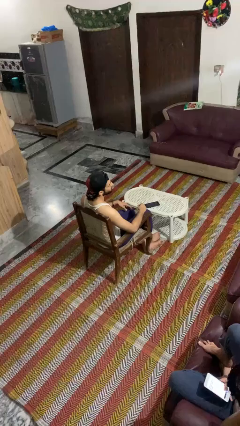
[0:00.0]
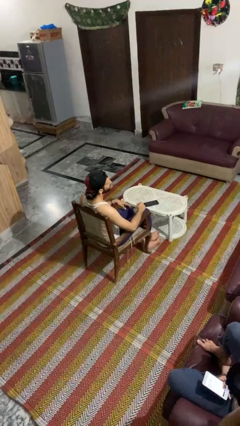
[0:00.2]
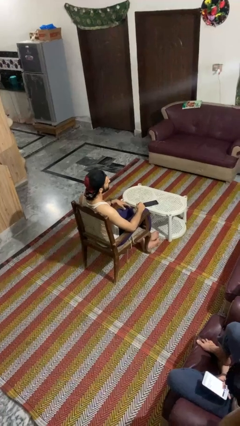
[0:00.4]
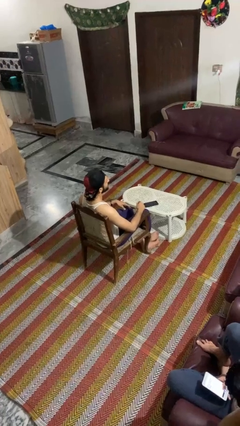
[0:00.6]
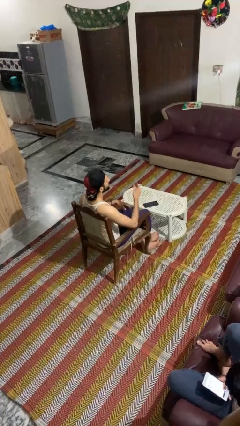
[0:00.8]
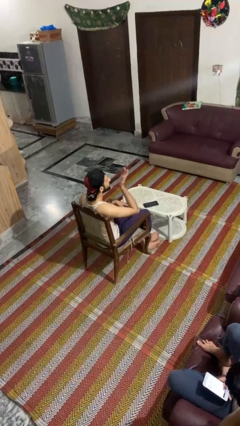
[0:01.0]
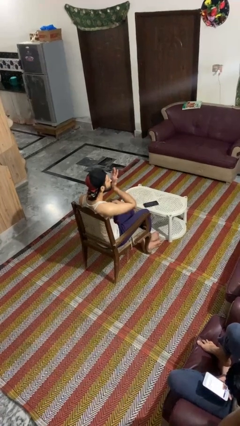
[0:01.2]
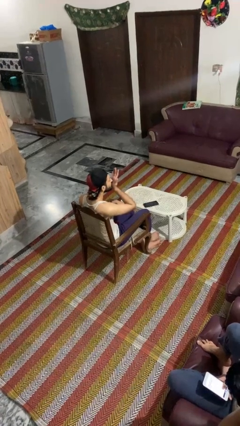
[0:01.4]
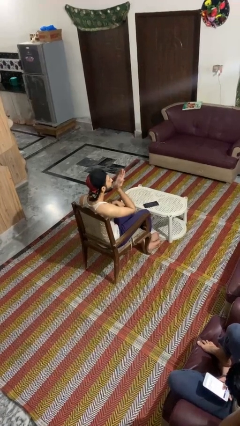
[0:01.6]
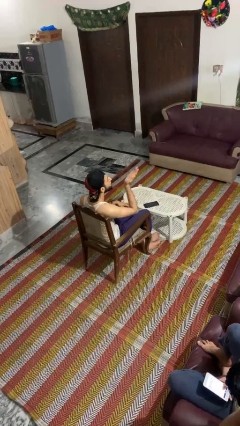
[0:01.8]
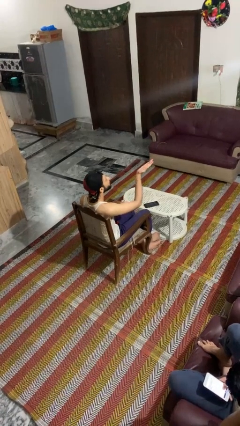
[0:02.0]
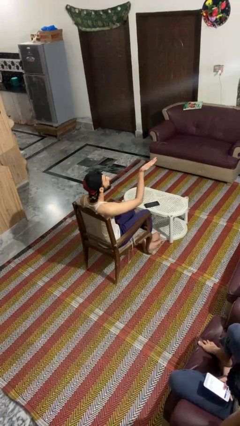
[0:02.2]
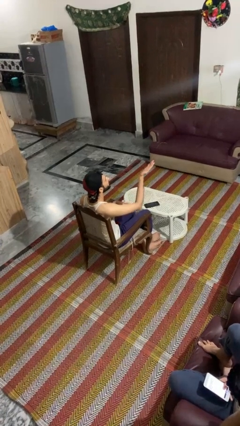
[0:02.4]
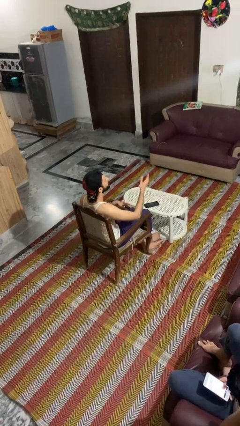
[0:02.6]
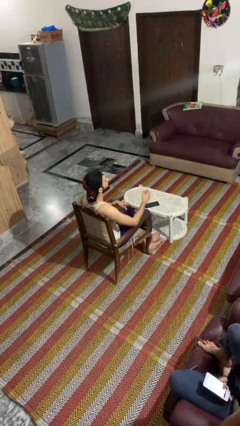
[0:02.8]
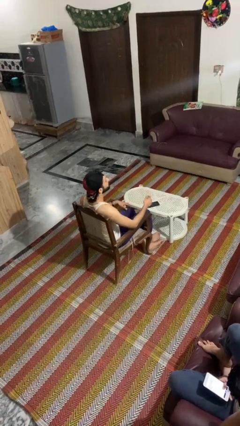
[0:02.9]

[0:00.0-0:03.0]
person gestures blow kiss

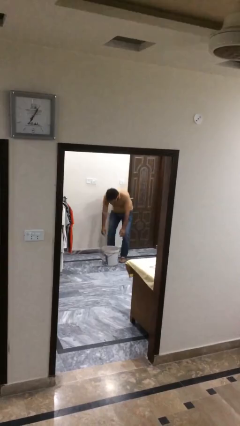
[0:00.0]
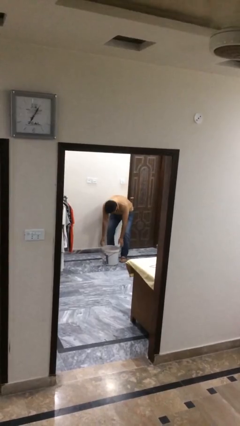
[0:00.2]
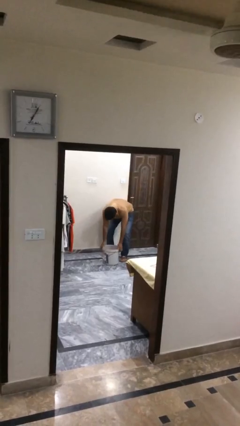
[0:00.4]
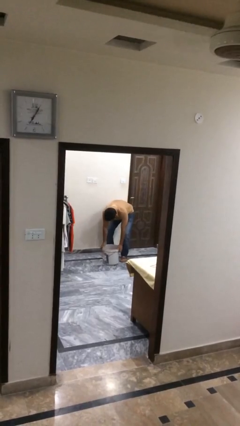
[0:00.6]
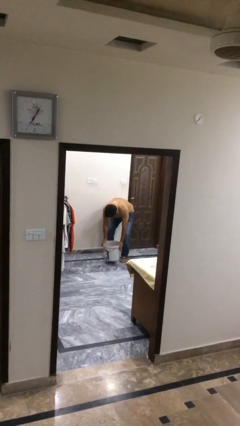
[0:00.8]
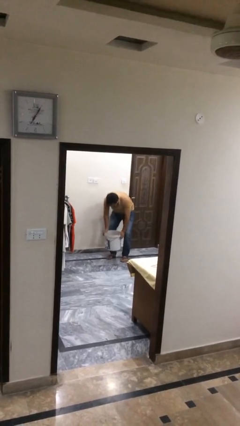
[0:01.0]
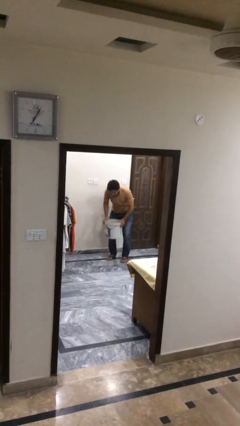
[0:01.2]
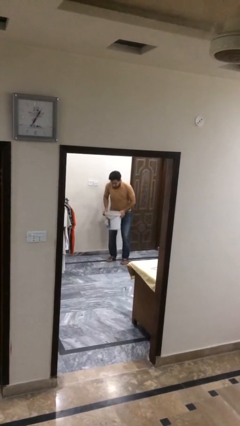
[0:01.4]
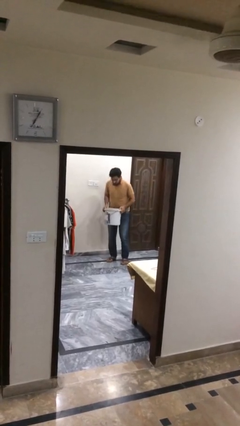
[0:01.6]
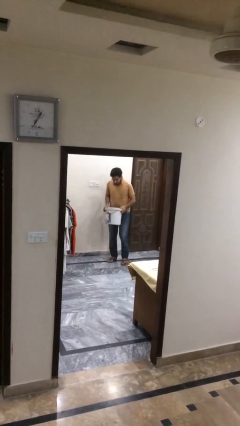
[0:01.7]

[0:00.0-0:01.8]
person picks up object from floor

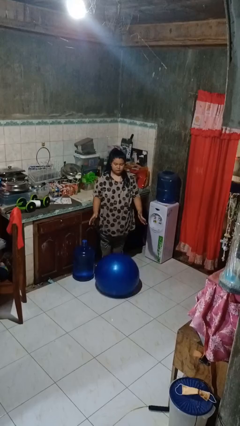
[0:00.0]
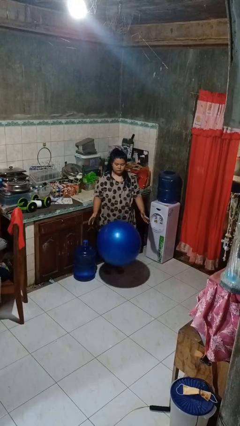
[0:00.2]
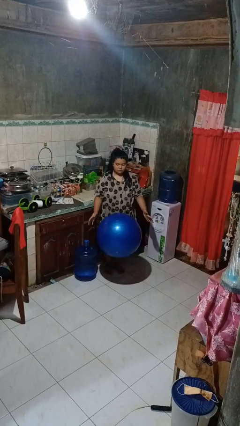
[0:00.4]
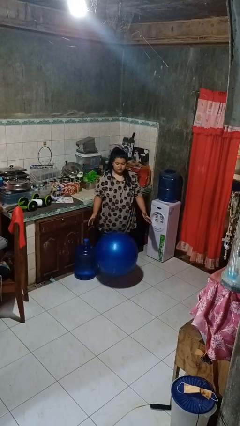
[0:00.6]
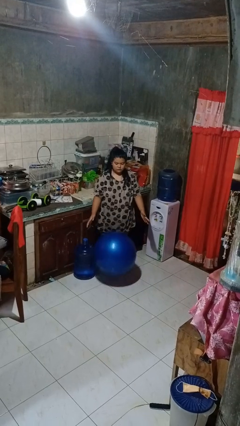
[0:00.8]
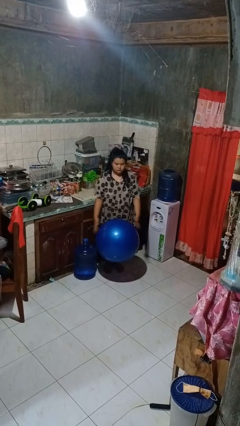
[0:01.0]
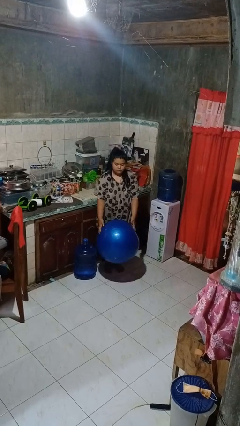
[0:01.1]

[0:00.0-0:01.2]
person bounces ball on floor

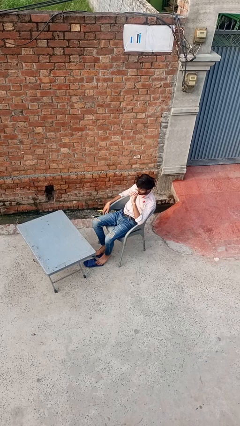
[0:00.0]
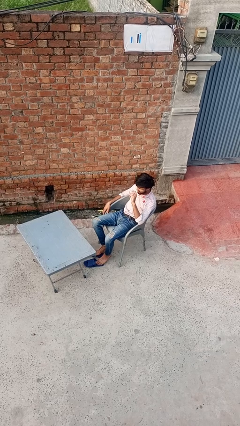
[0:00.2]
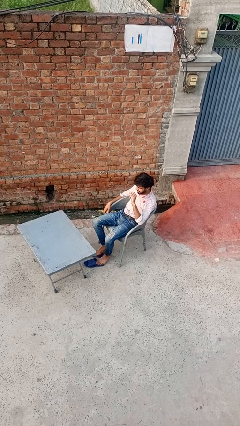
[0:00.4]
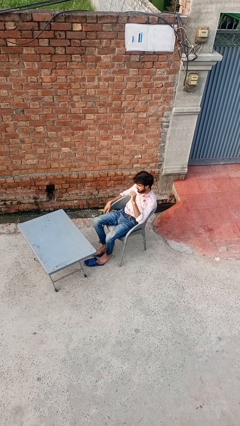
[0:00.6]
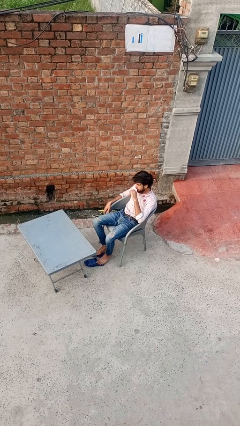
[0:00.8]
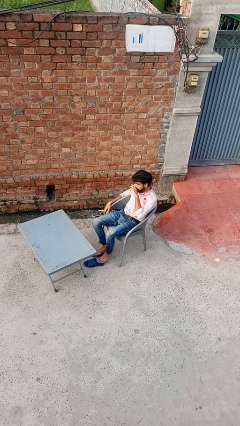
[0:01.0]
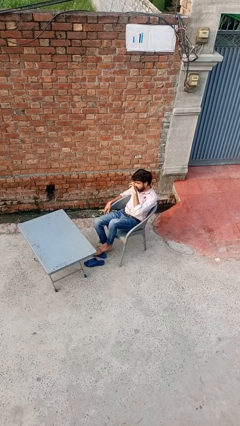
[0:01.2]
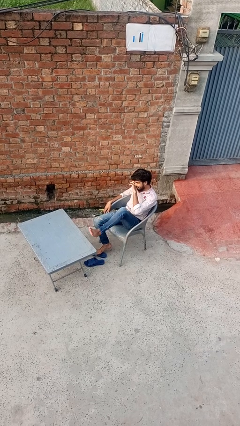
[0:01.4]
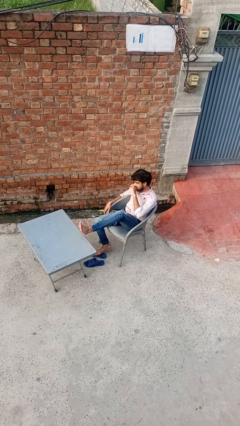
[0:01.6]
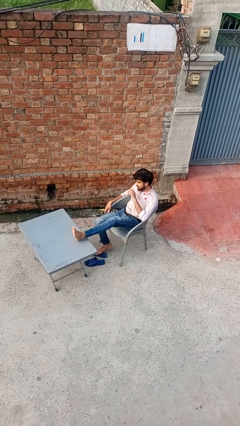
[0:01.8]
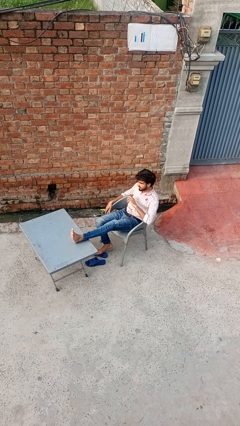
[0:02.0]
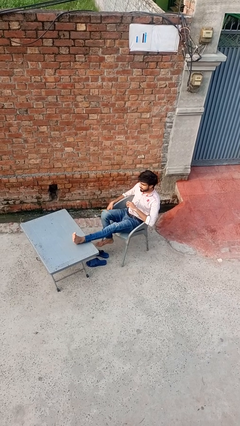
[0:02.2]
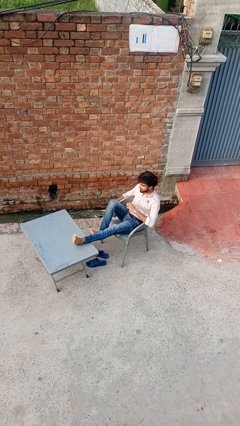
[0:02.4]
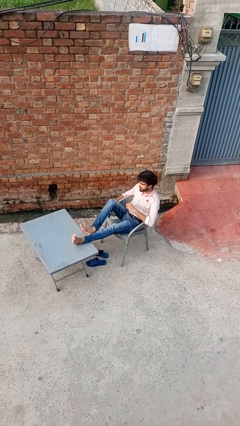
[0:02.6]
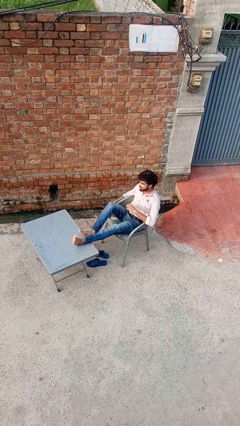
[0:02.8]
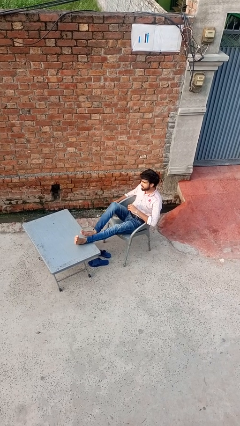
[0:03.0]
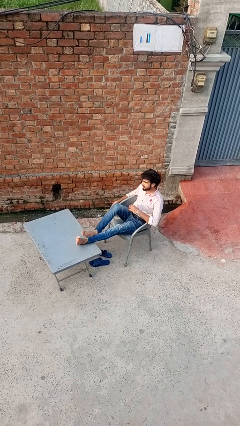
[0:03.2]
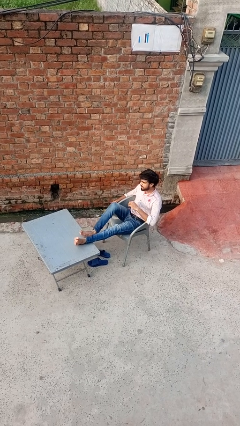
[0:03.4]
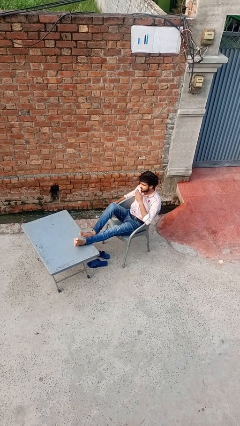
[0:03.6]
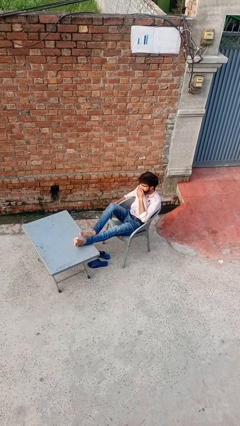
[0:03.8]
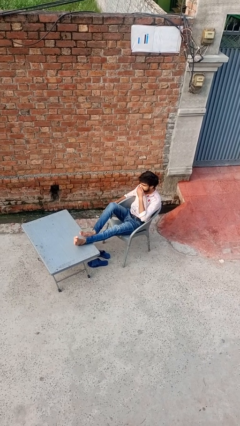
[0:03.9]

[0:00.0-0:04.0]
person puts feet up

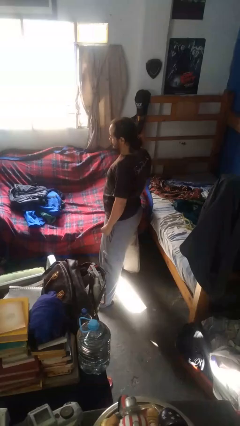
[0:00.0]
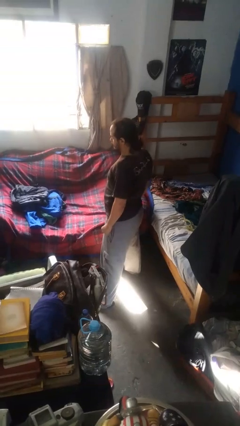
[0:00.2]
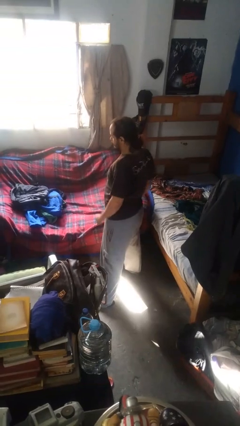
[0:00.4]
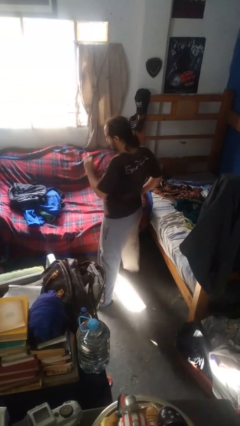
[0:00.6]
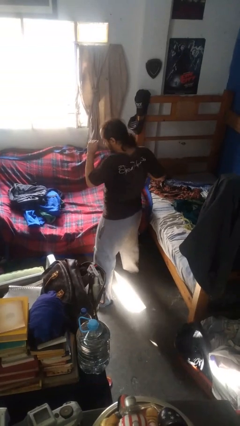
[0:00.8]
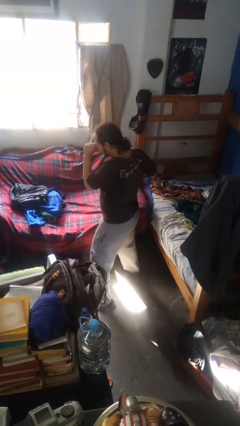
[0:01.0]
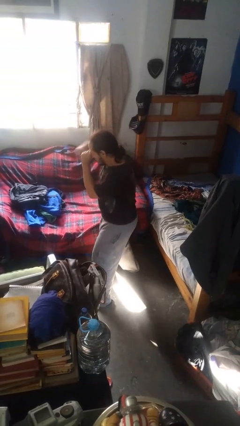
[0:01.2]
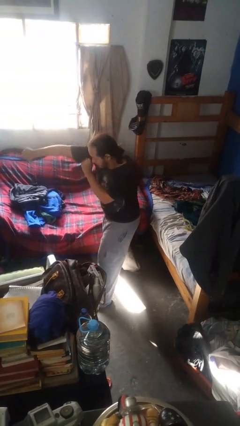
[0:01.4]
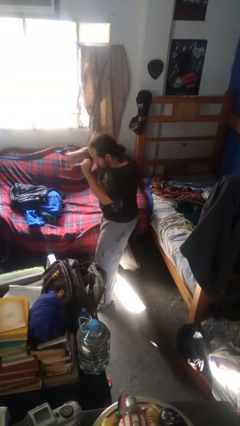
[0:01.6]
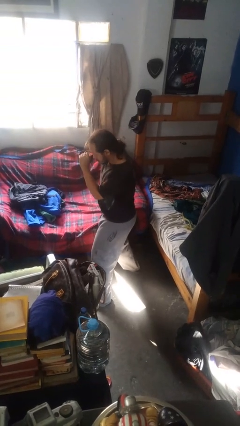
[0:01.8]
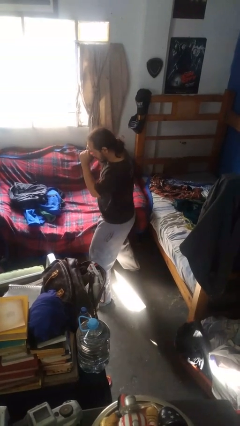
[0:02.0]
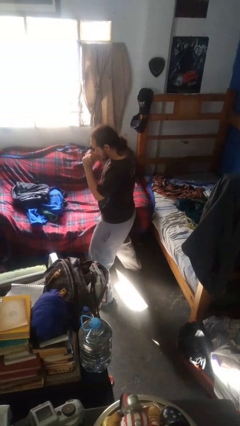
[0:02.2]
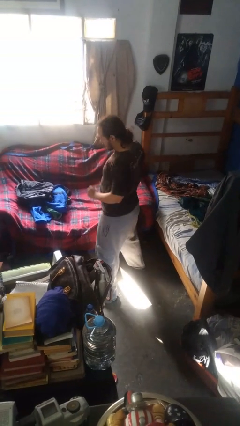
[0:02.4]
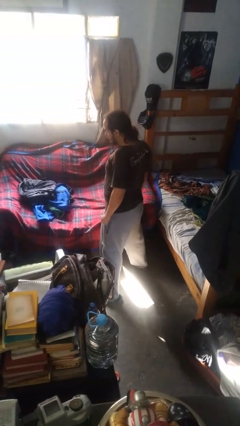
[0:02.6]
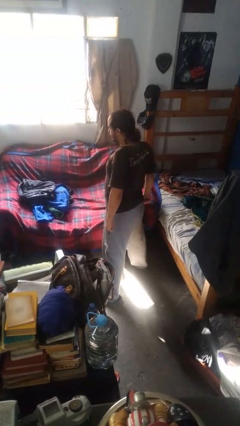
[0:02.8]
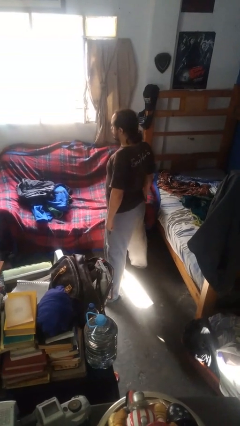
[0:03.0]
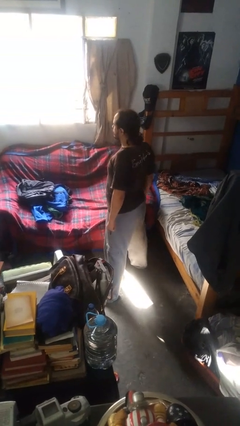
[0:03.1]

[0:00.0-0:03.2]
person punches

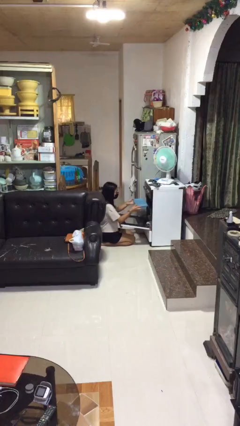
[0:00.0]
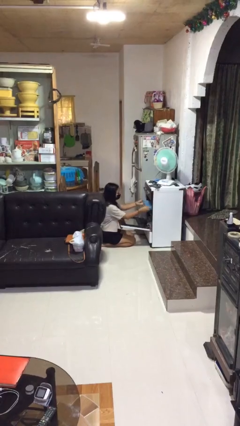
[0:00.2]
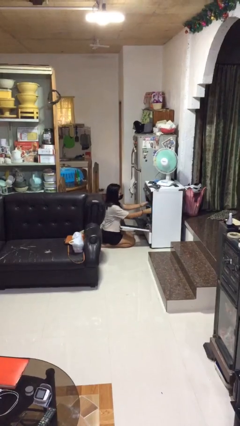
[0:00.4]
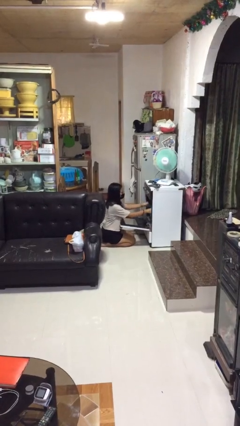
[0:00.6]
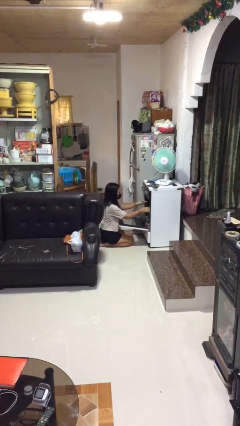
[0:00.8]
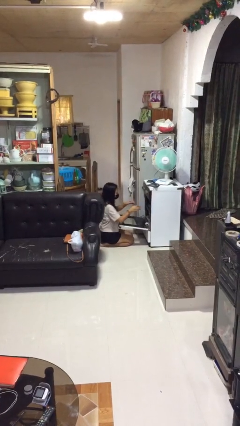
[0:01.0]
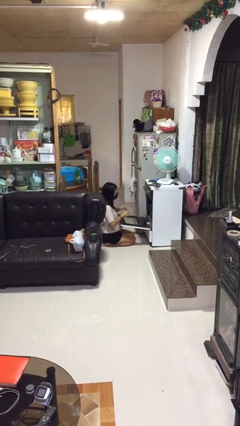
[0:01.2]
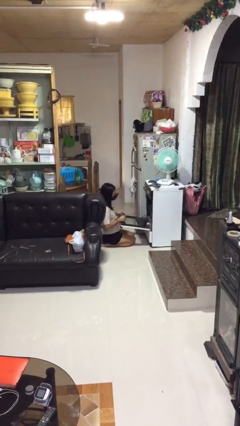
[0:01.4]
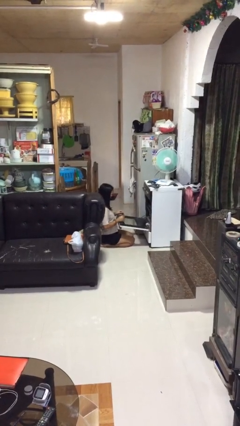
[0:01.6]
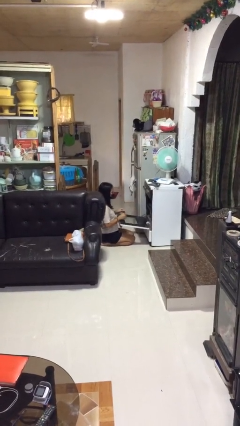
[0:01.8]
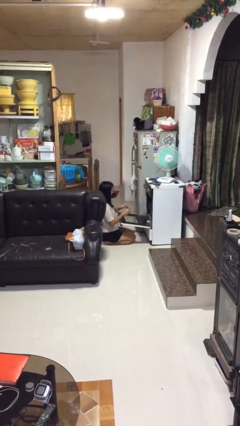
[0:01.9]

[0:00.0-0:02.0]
person puts object into oven

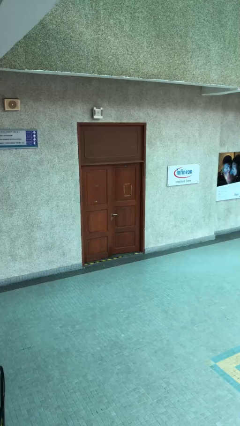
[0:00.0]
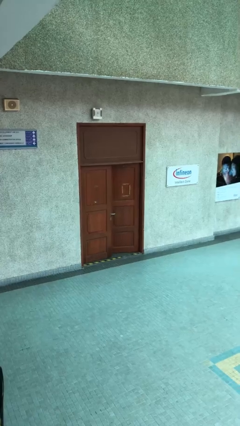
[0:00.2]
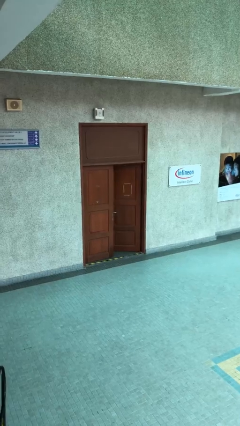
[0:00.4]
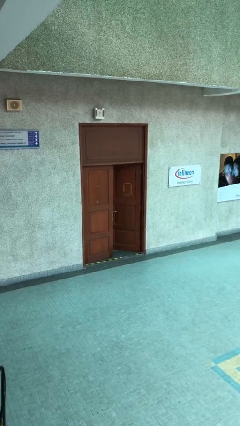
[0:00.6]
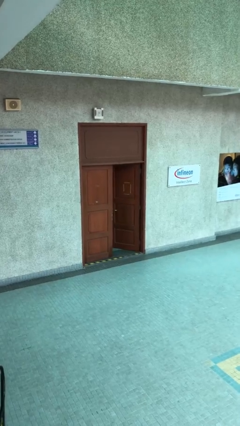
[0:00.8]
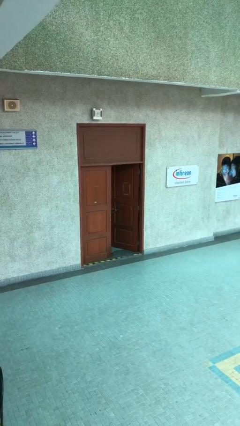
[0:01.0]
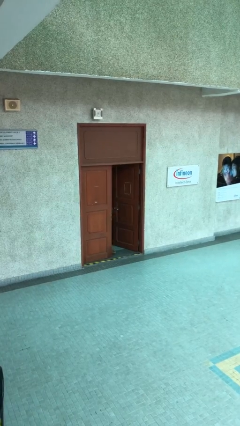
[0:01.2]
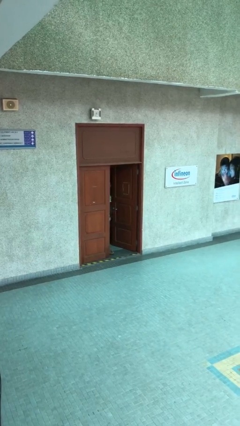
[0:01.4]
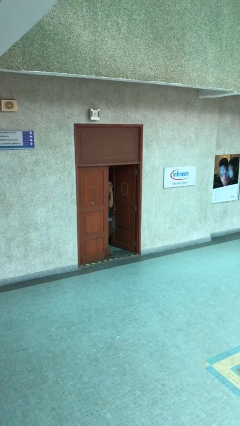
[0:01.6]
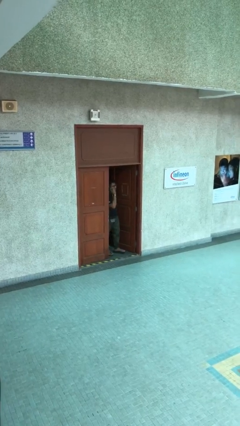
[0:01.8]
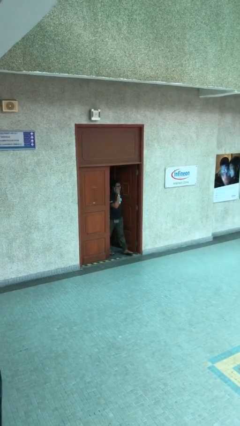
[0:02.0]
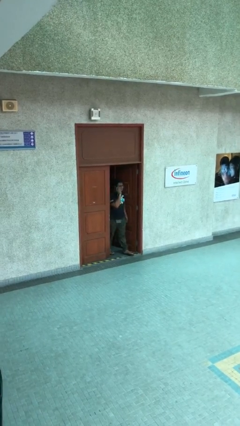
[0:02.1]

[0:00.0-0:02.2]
person opens facility door
